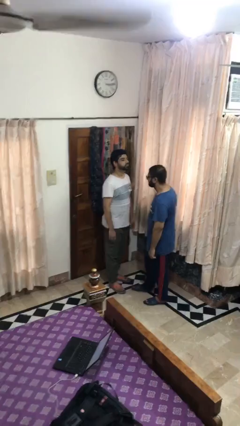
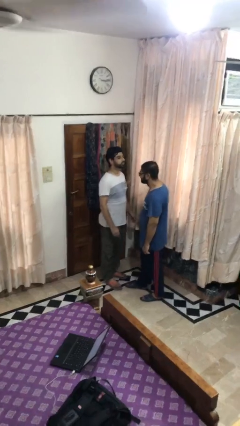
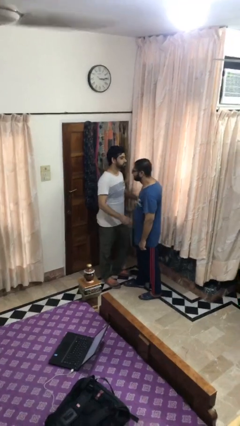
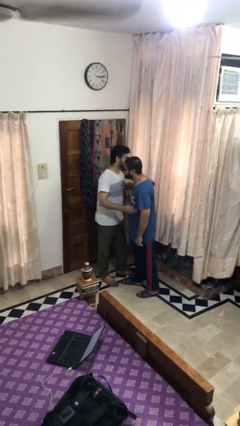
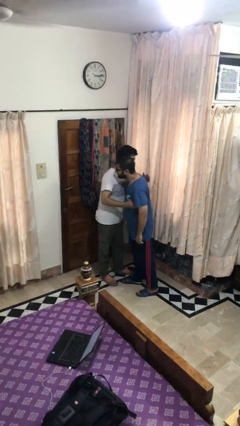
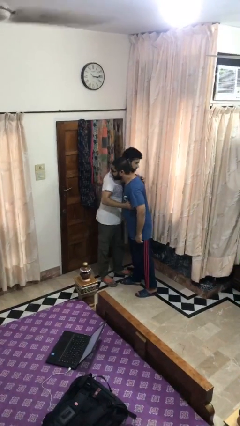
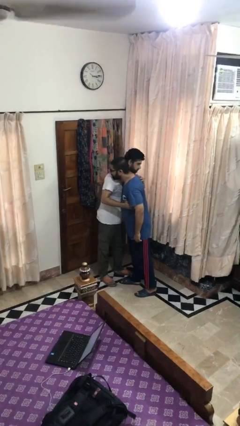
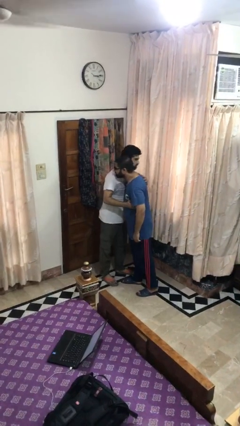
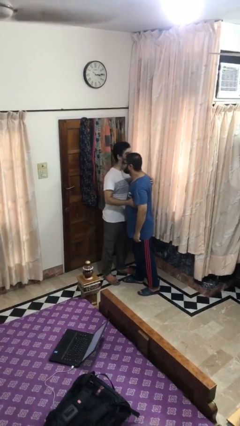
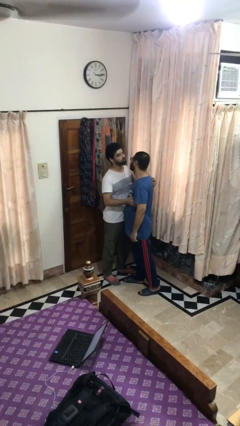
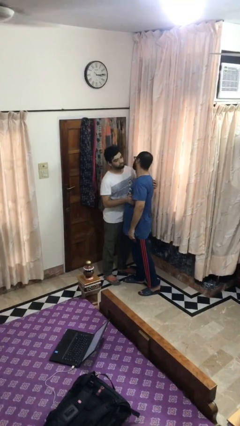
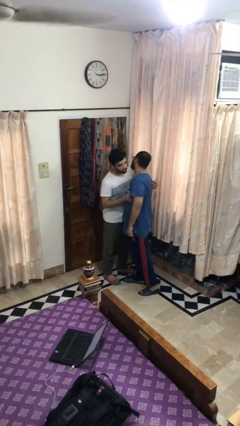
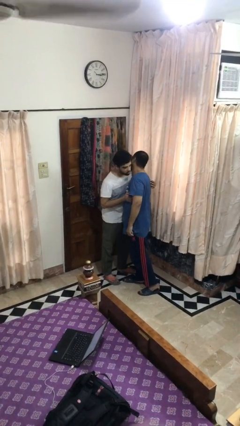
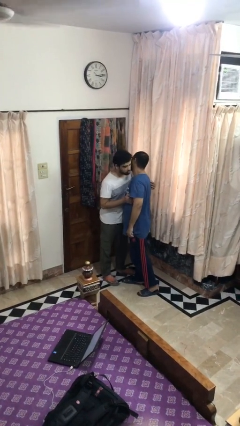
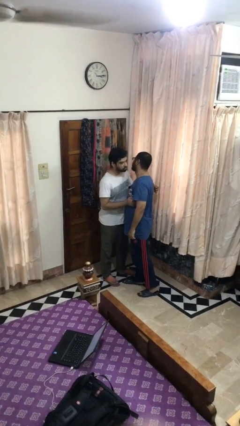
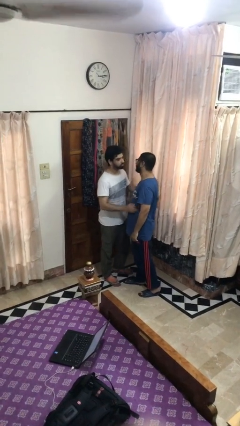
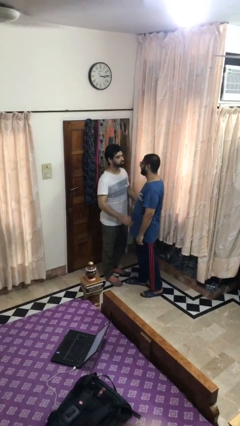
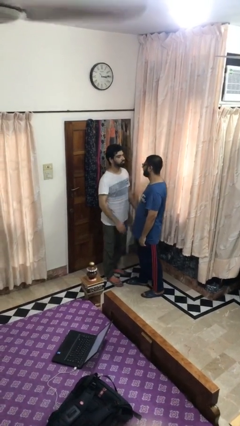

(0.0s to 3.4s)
person embraces person

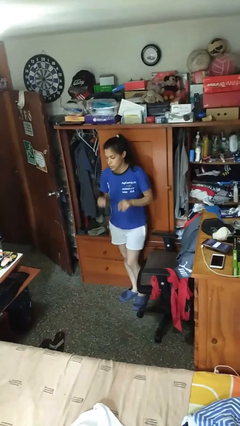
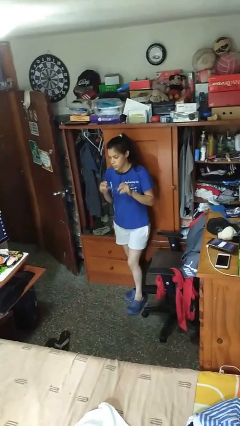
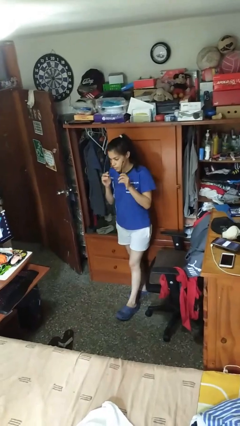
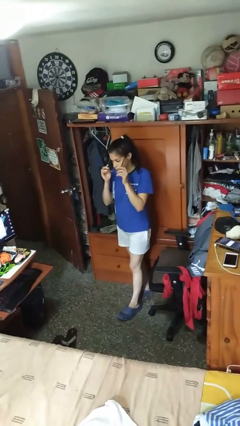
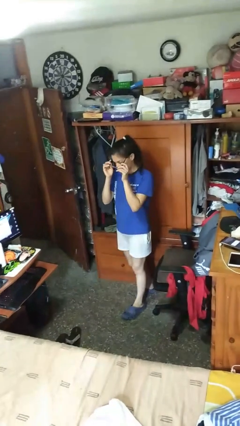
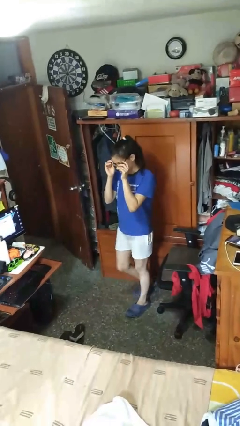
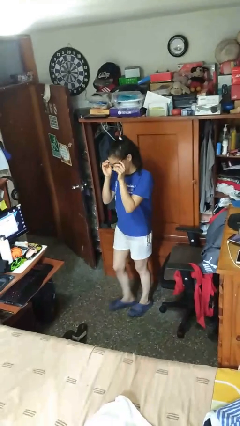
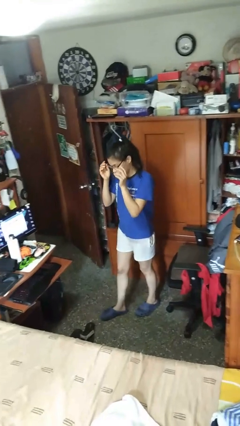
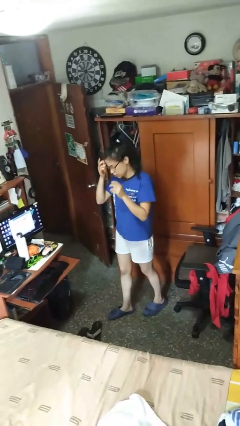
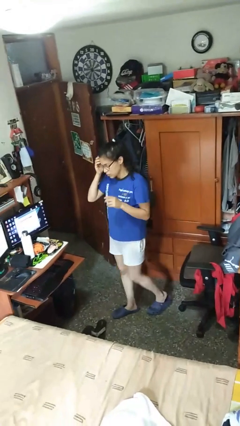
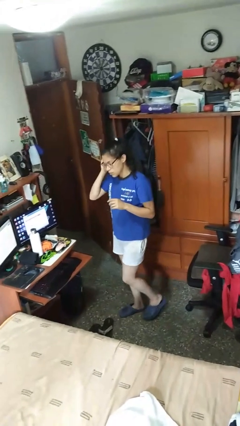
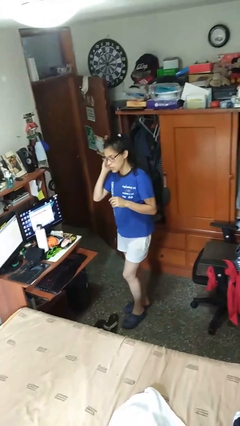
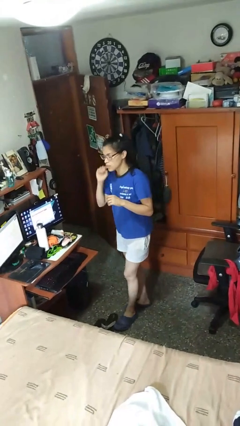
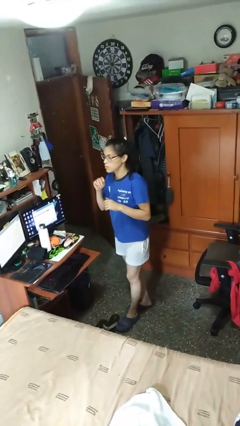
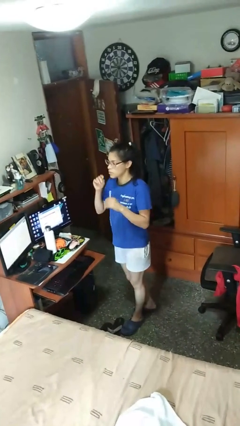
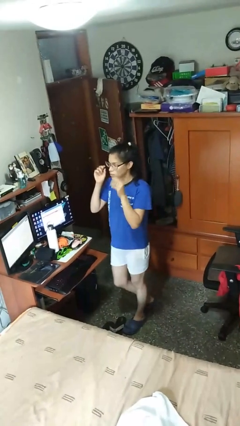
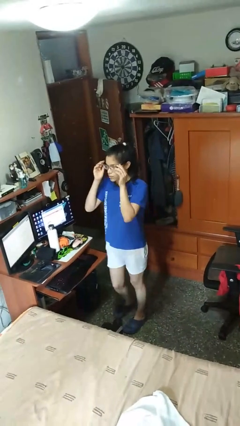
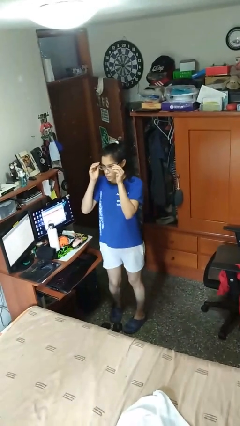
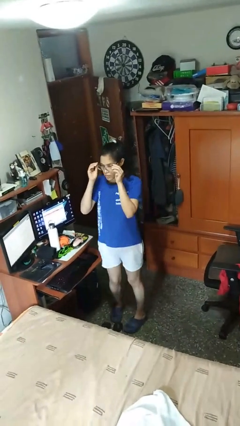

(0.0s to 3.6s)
person puts on glasses

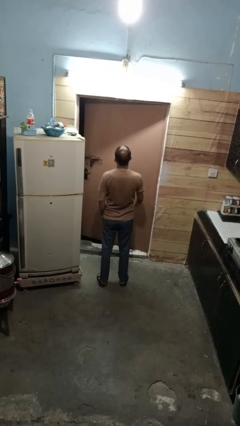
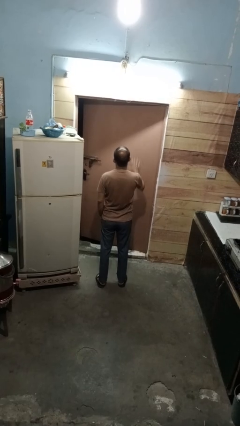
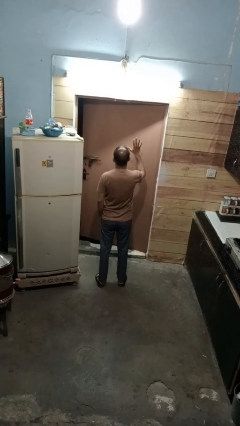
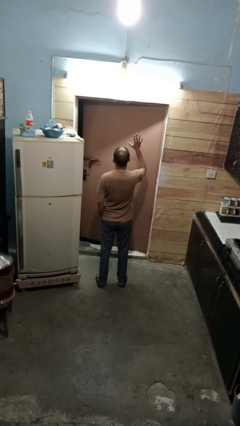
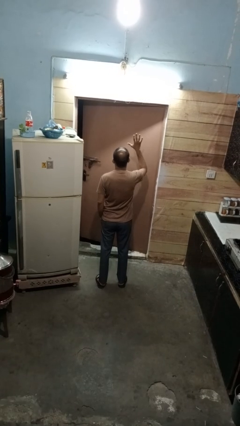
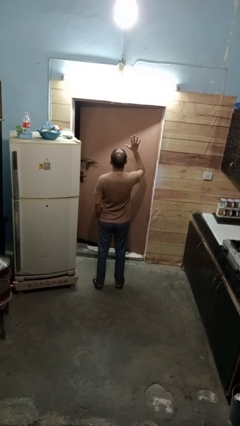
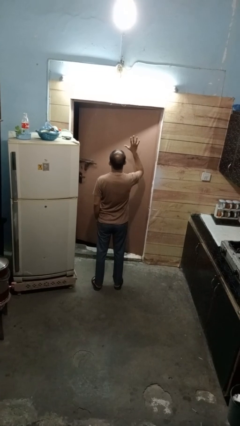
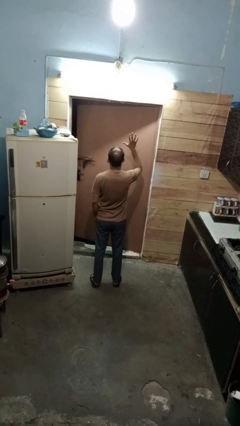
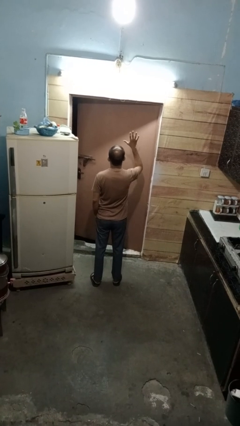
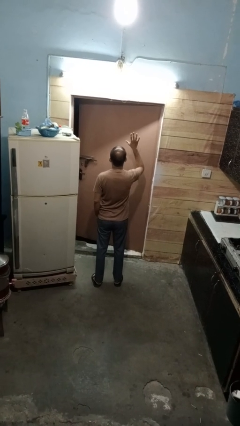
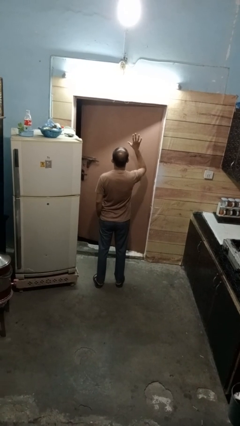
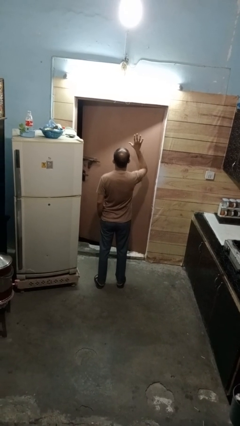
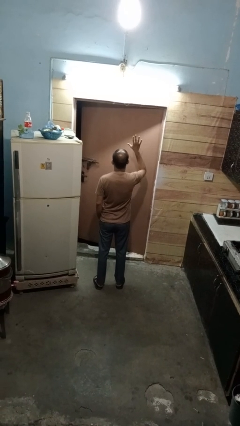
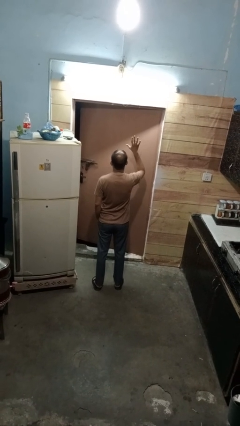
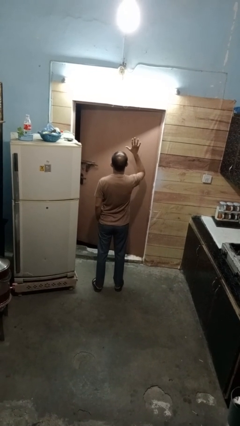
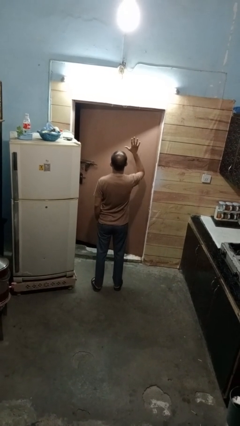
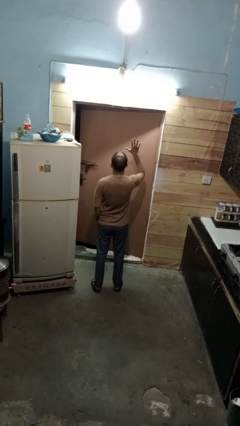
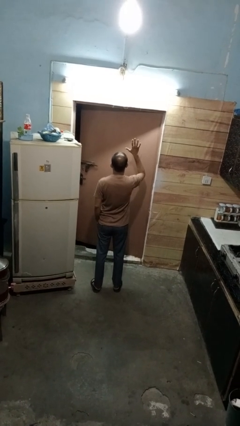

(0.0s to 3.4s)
person gestures number five

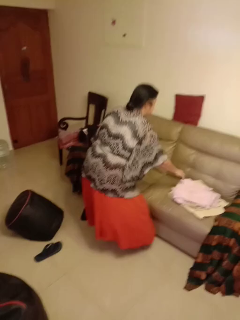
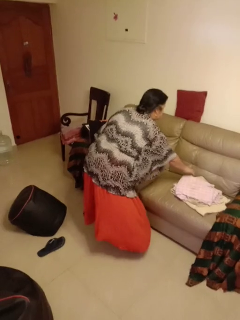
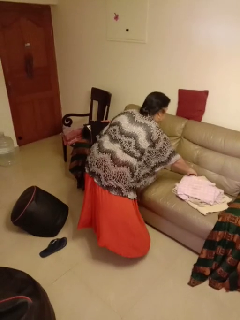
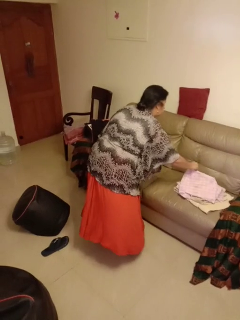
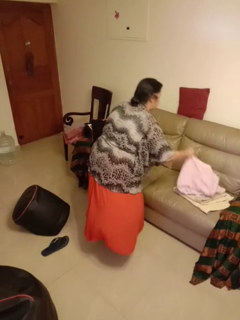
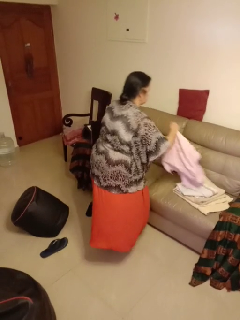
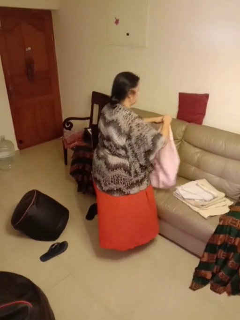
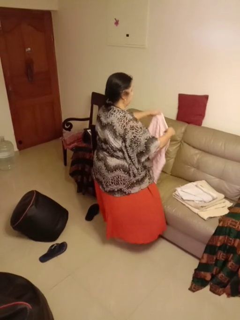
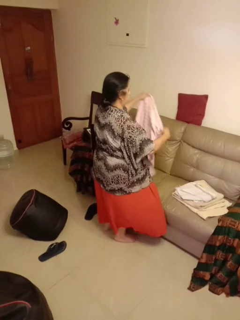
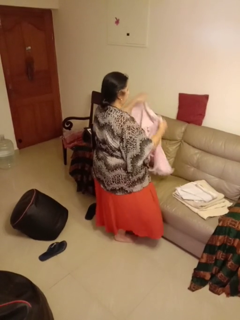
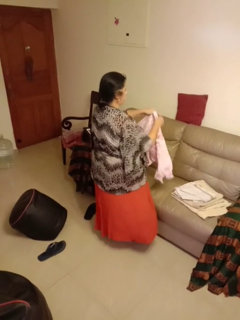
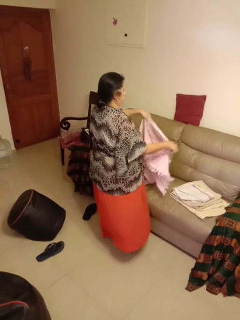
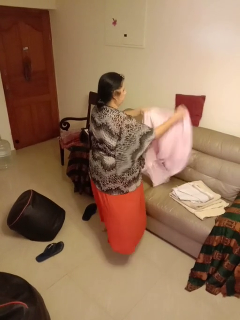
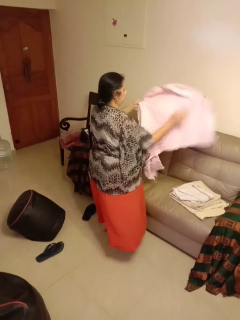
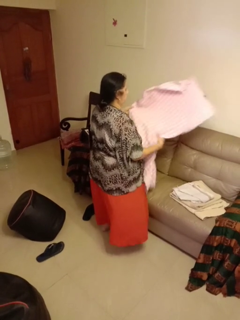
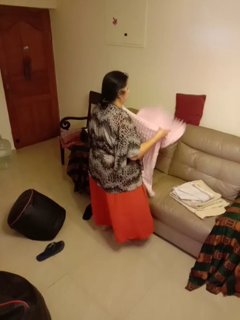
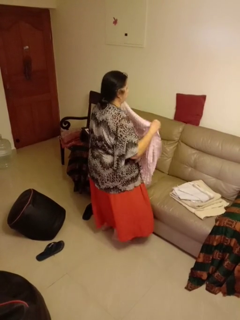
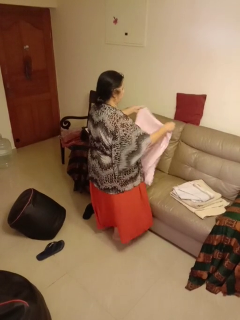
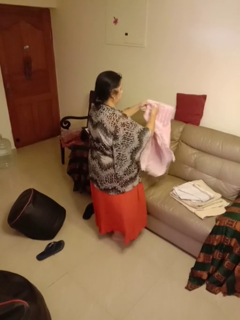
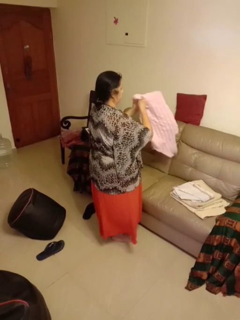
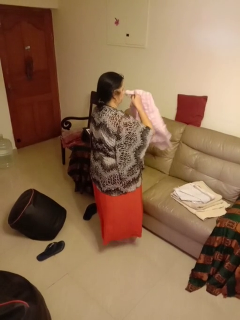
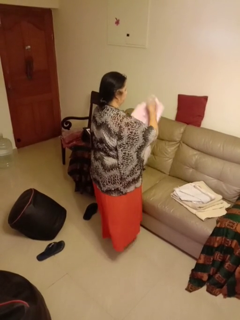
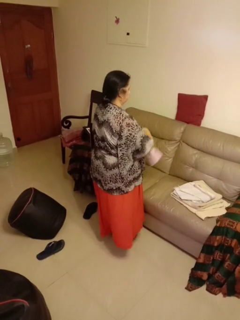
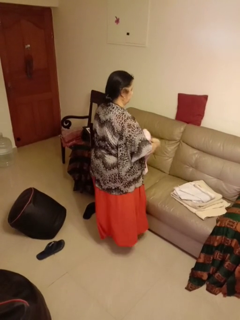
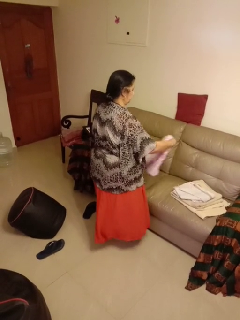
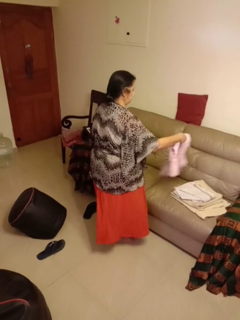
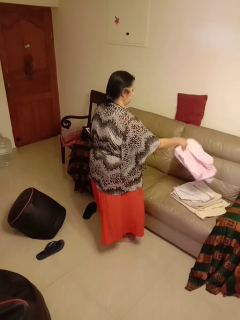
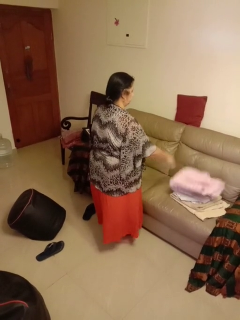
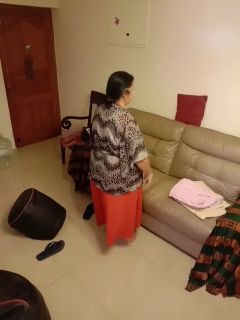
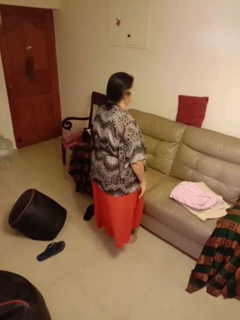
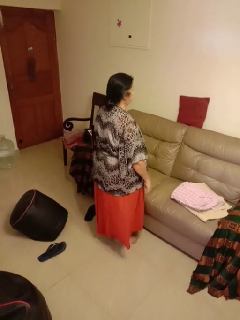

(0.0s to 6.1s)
person folds towel

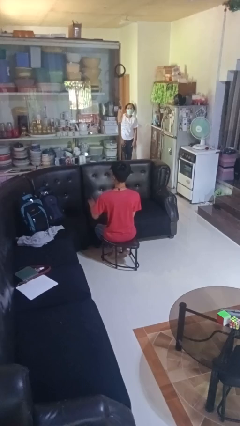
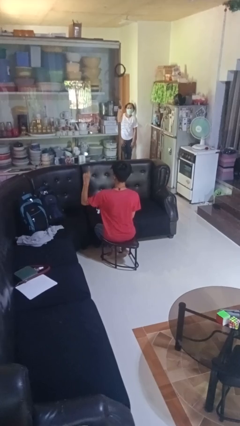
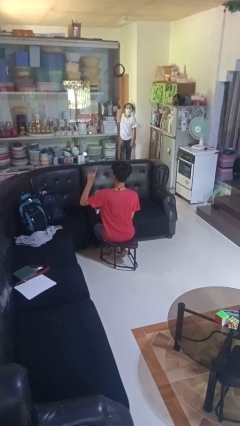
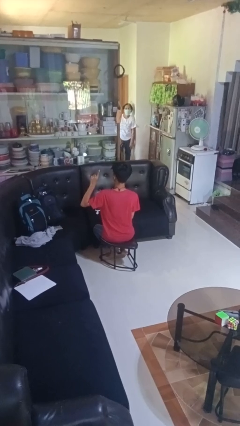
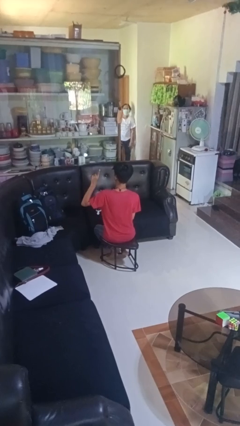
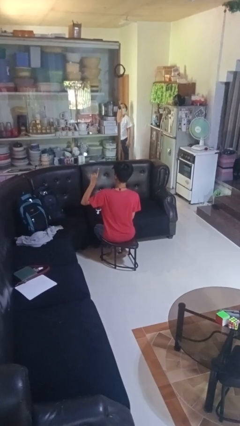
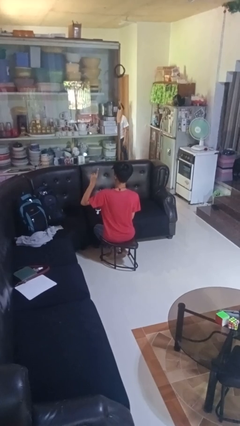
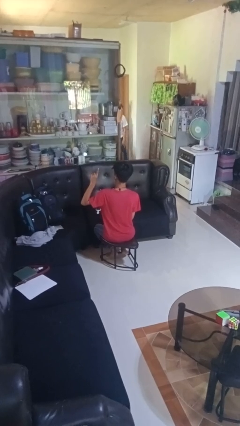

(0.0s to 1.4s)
person gestures number one

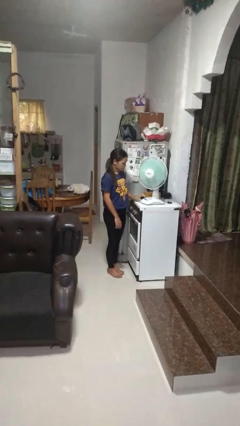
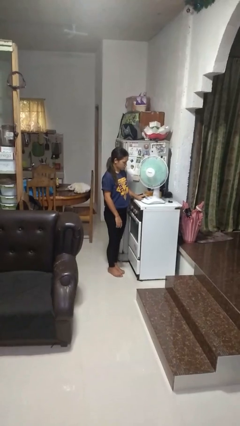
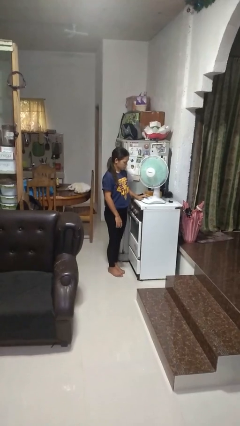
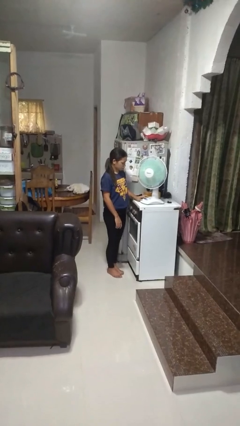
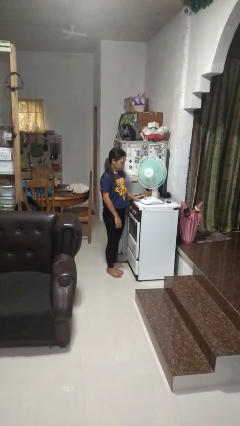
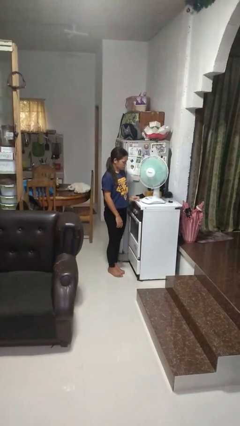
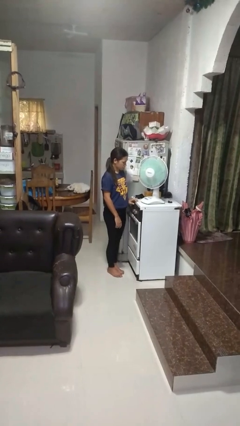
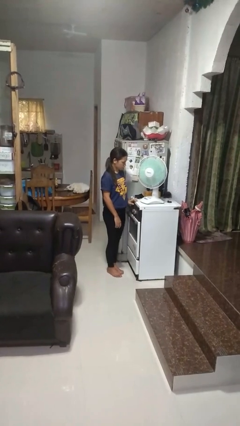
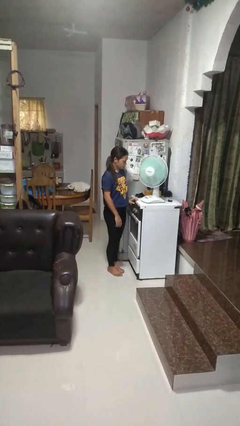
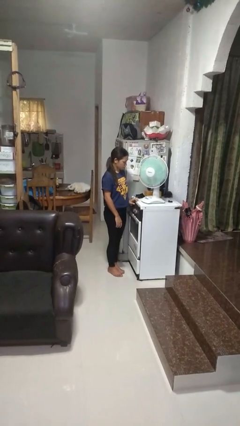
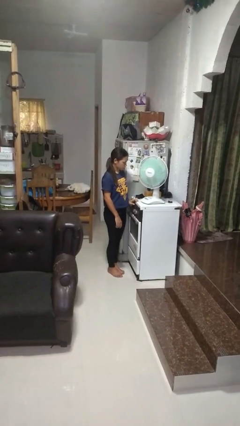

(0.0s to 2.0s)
person turns on fan
